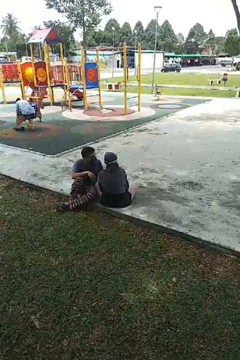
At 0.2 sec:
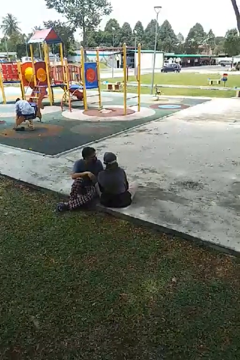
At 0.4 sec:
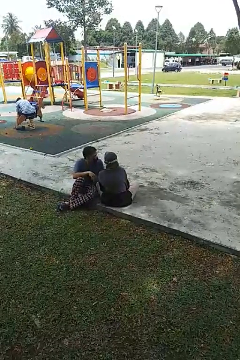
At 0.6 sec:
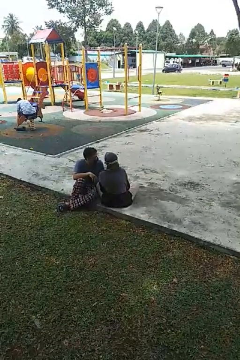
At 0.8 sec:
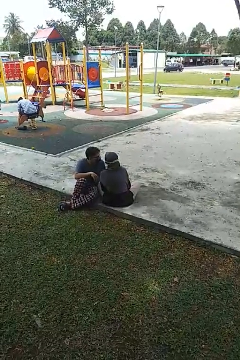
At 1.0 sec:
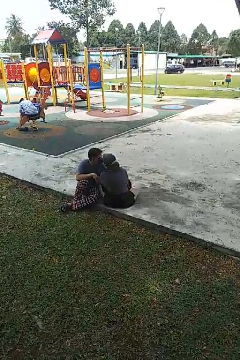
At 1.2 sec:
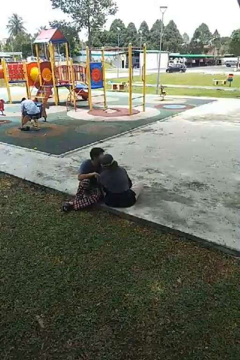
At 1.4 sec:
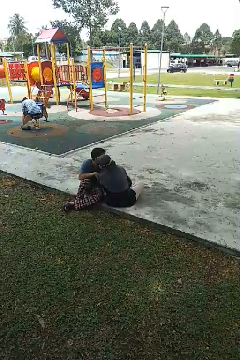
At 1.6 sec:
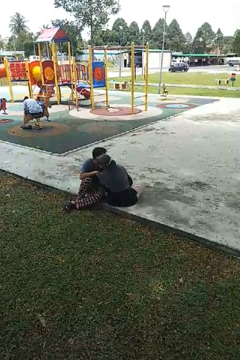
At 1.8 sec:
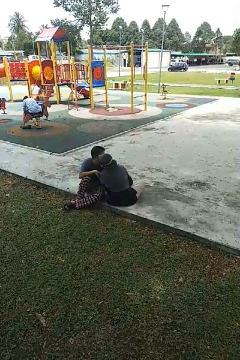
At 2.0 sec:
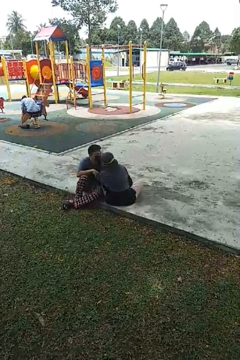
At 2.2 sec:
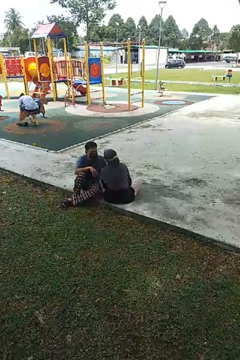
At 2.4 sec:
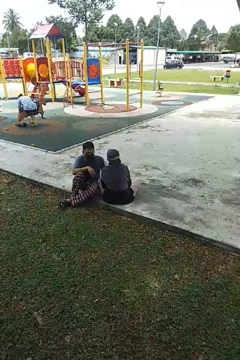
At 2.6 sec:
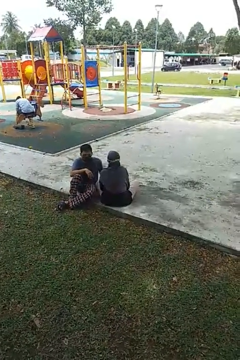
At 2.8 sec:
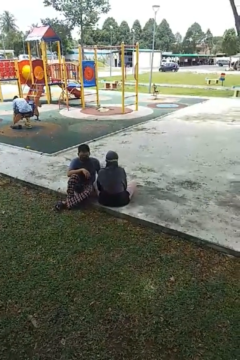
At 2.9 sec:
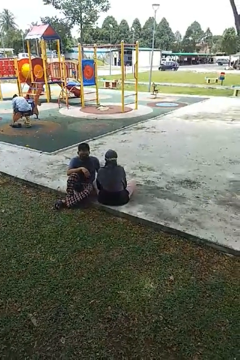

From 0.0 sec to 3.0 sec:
person kisses cheek of person

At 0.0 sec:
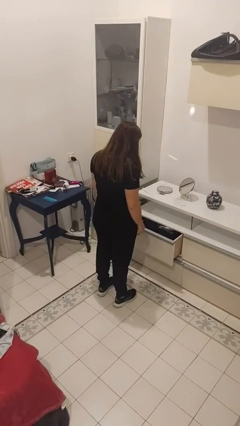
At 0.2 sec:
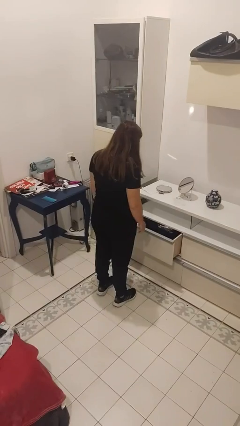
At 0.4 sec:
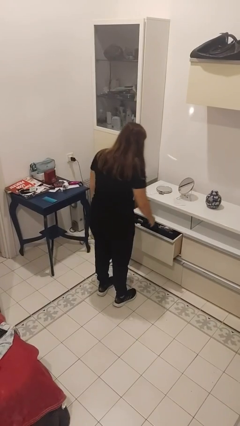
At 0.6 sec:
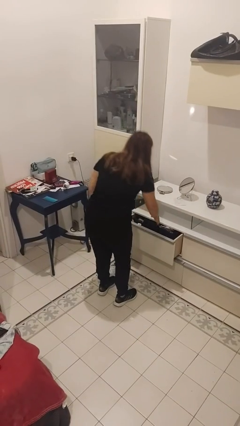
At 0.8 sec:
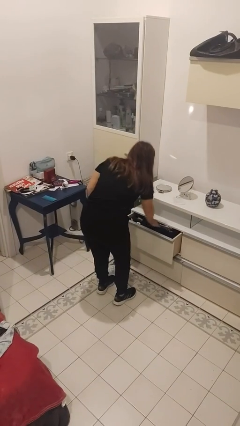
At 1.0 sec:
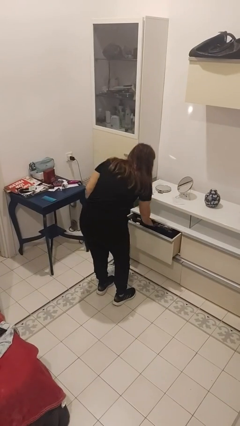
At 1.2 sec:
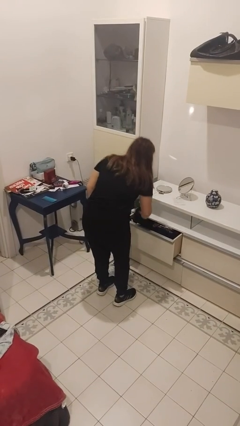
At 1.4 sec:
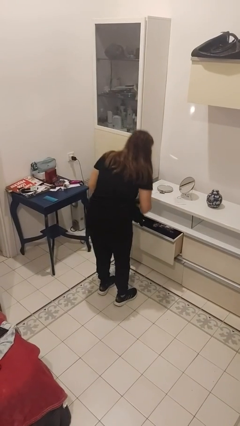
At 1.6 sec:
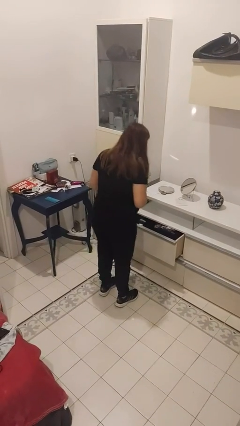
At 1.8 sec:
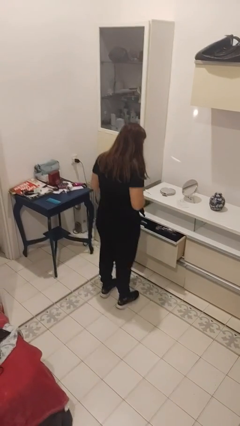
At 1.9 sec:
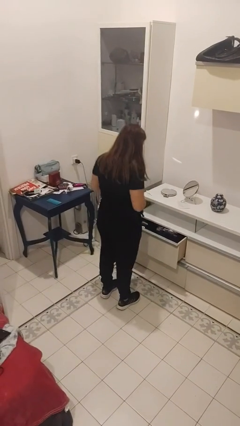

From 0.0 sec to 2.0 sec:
person takes clothes from dresser

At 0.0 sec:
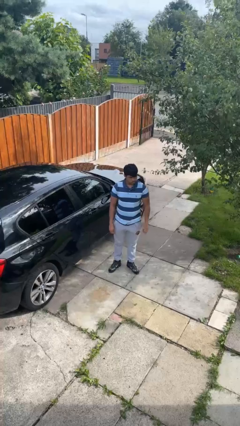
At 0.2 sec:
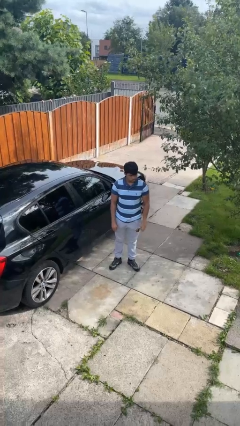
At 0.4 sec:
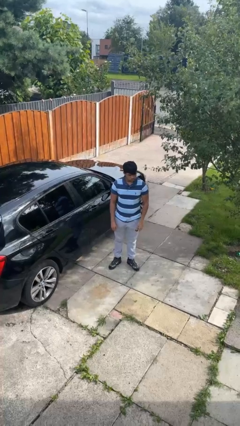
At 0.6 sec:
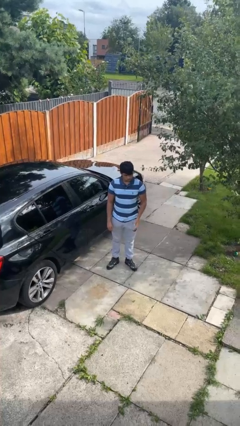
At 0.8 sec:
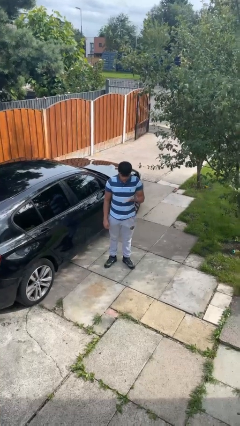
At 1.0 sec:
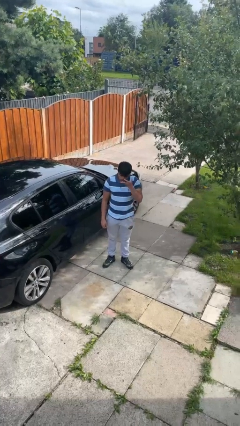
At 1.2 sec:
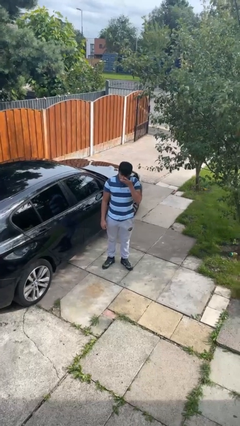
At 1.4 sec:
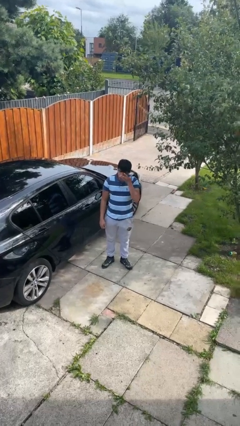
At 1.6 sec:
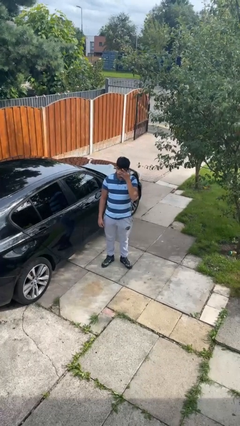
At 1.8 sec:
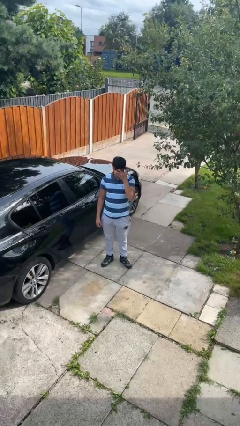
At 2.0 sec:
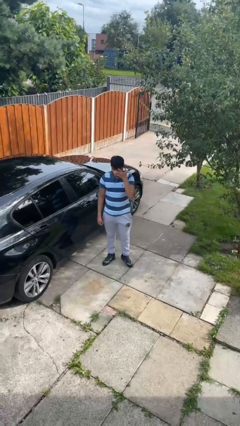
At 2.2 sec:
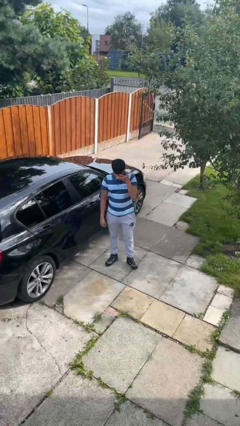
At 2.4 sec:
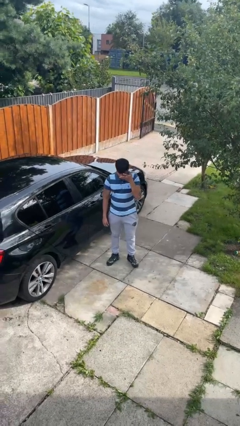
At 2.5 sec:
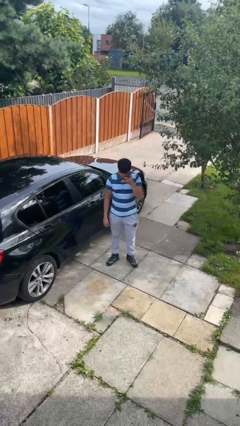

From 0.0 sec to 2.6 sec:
person licks fingers

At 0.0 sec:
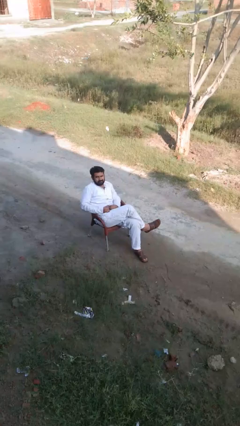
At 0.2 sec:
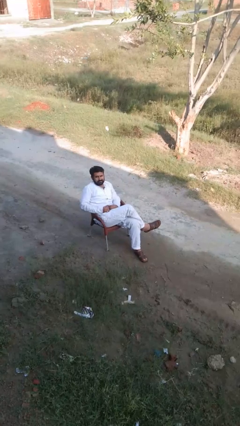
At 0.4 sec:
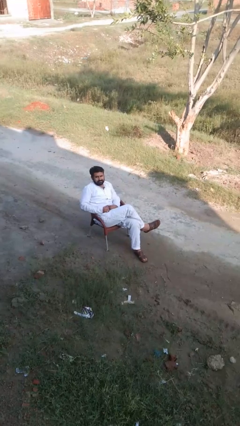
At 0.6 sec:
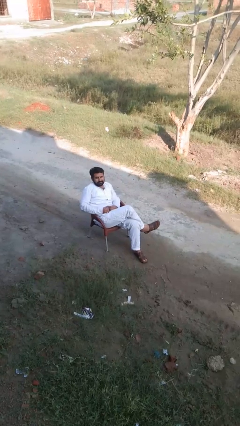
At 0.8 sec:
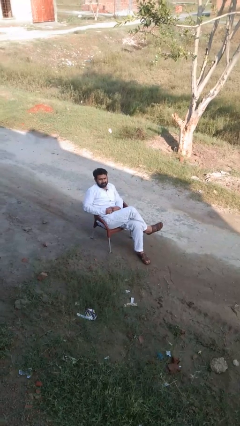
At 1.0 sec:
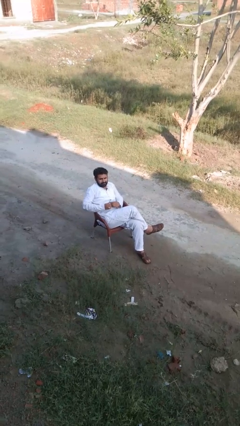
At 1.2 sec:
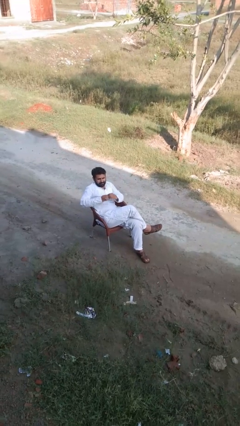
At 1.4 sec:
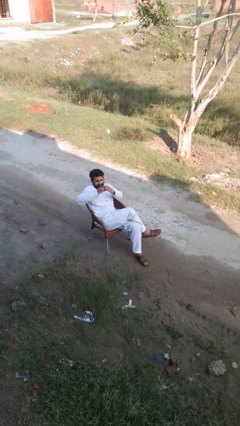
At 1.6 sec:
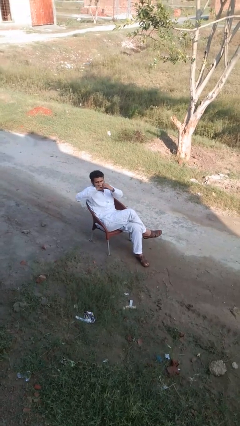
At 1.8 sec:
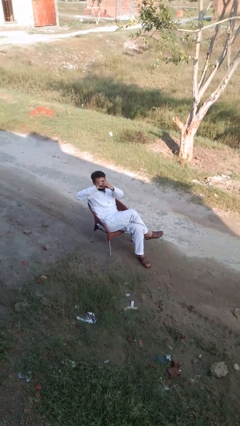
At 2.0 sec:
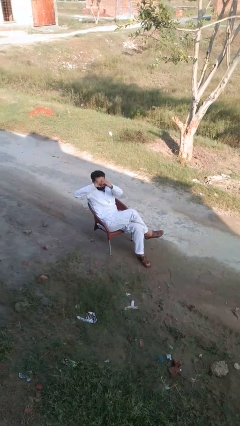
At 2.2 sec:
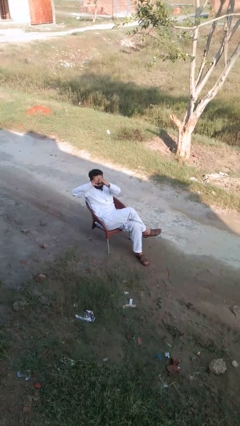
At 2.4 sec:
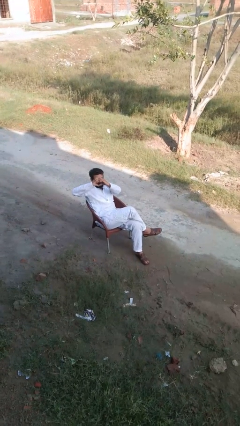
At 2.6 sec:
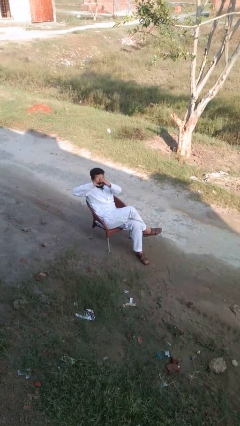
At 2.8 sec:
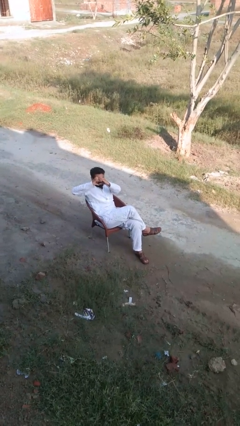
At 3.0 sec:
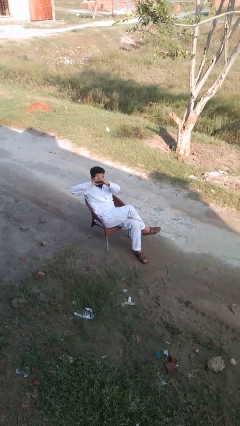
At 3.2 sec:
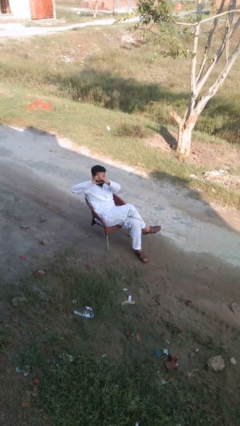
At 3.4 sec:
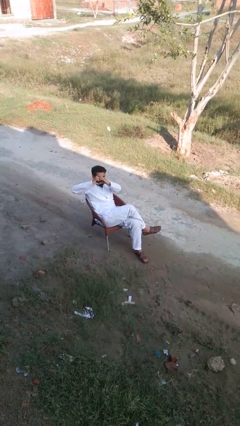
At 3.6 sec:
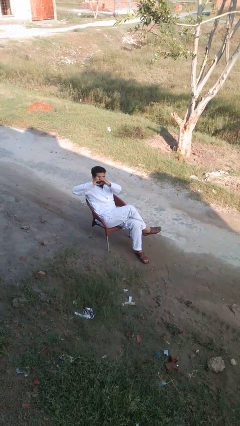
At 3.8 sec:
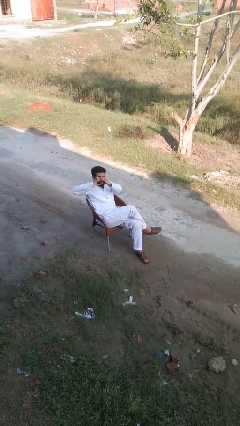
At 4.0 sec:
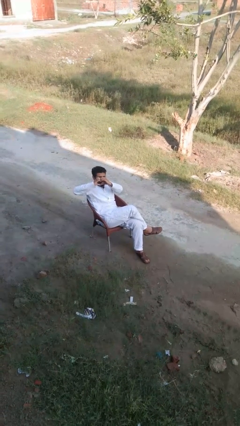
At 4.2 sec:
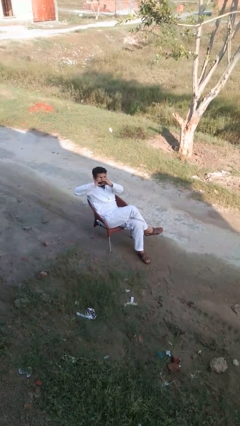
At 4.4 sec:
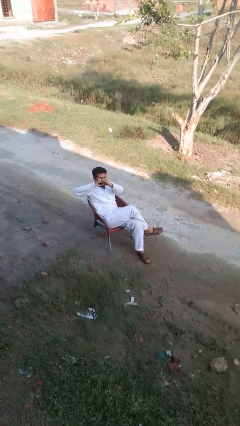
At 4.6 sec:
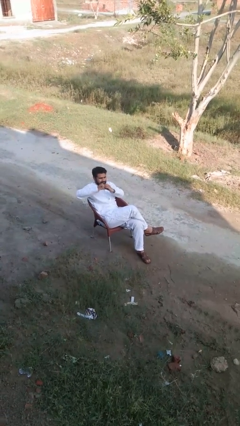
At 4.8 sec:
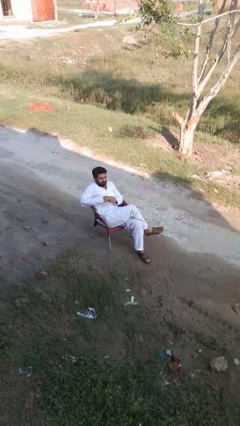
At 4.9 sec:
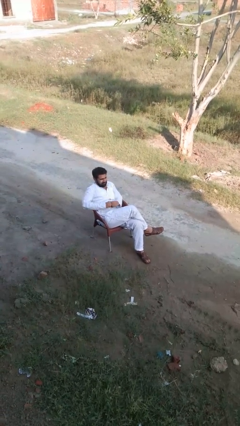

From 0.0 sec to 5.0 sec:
person gestures heart

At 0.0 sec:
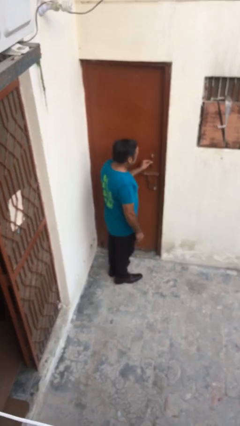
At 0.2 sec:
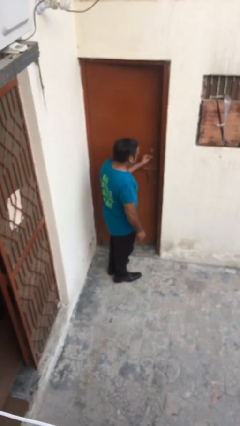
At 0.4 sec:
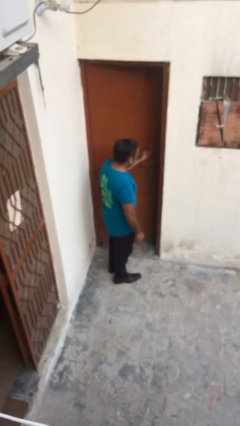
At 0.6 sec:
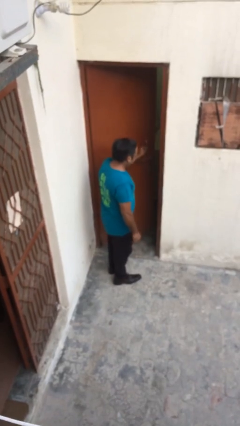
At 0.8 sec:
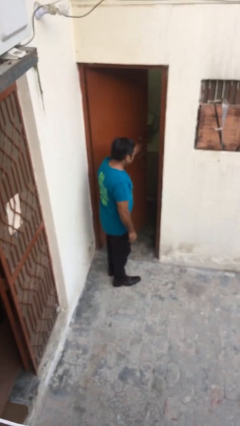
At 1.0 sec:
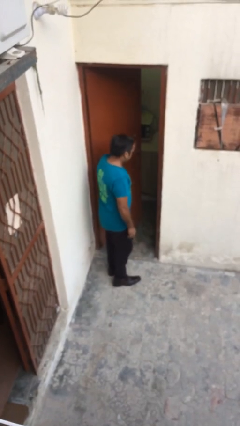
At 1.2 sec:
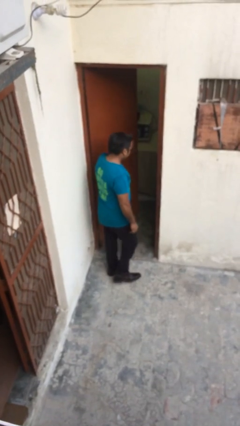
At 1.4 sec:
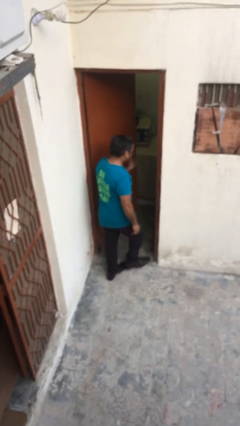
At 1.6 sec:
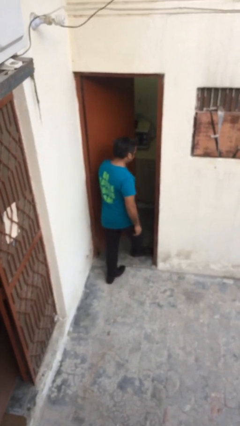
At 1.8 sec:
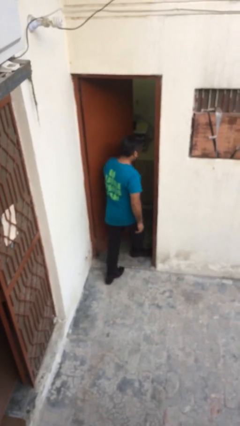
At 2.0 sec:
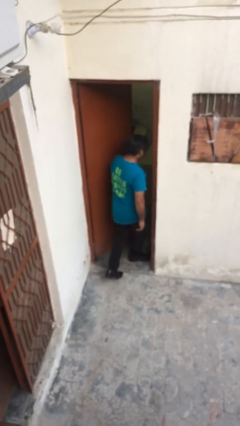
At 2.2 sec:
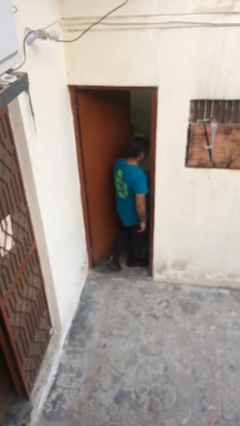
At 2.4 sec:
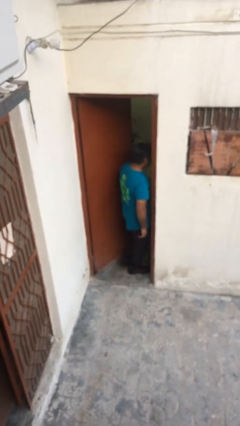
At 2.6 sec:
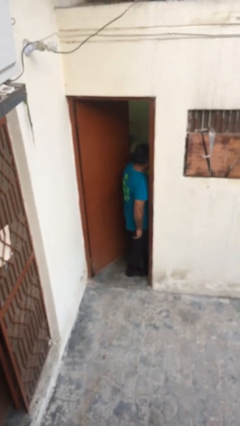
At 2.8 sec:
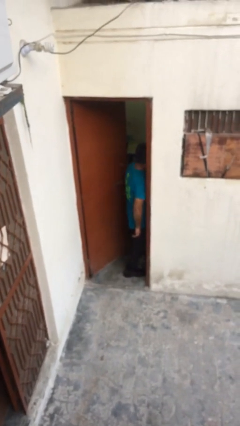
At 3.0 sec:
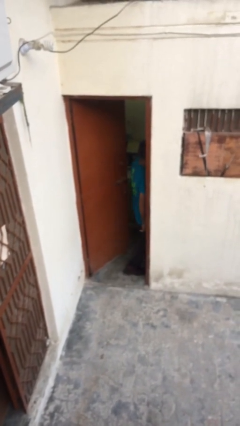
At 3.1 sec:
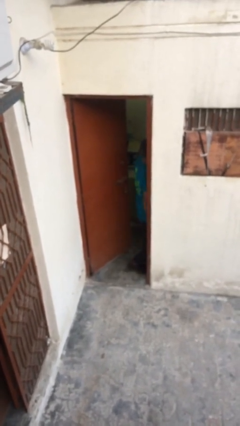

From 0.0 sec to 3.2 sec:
person exits scene through structure

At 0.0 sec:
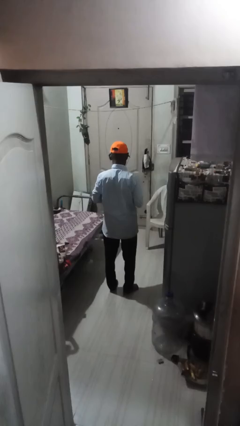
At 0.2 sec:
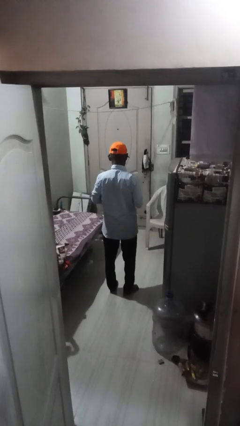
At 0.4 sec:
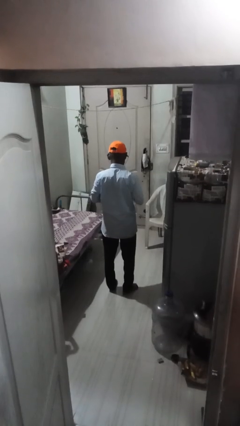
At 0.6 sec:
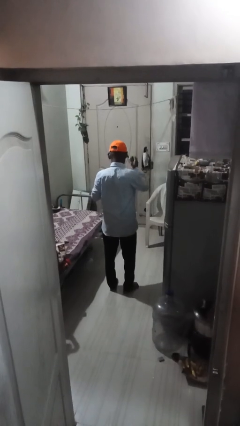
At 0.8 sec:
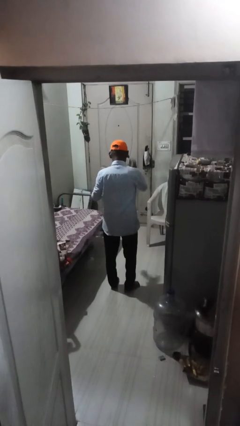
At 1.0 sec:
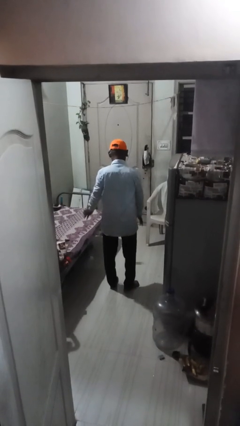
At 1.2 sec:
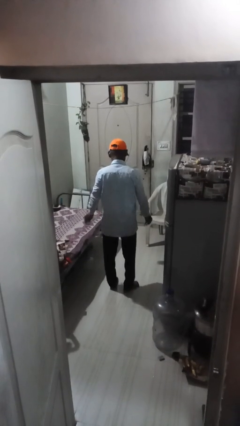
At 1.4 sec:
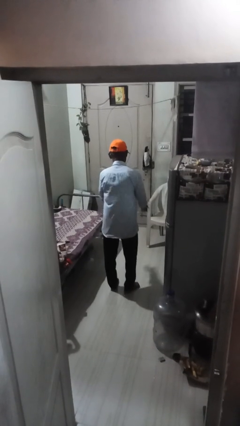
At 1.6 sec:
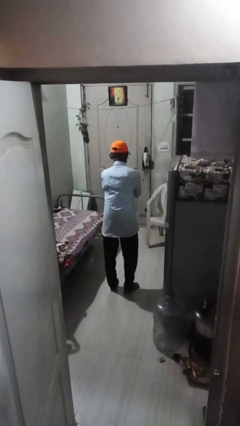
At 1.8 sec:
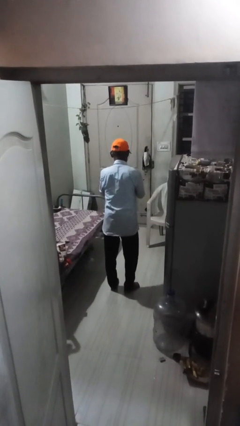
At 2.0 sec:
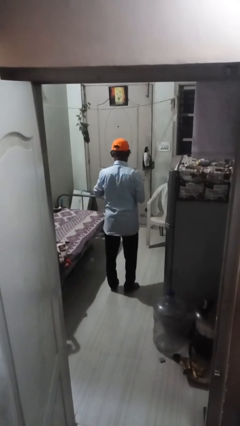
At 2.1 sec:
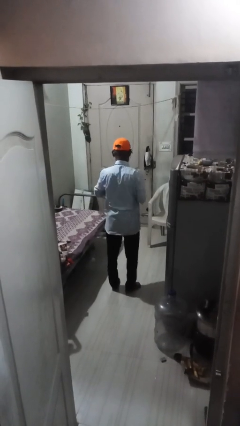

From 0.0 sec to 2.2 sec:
person bounces ball on floor
